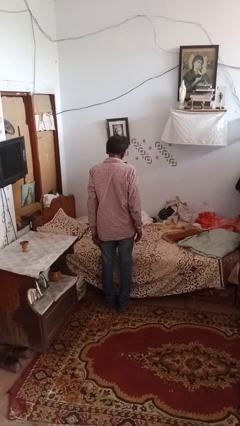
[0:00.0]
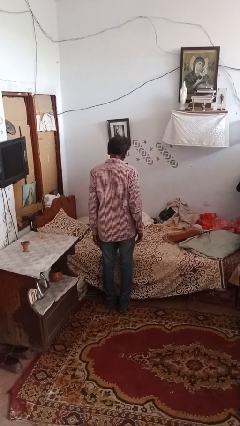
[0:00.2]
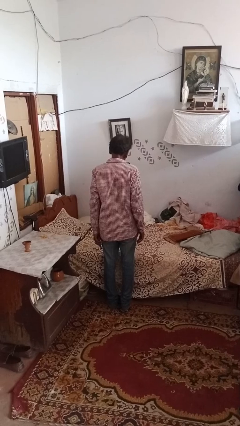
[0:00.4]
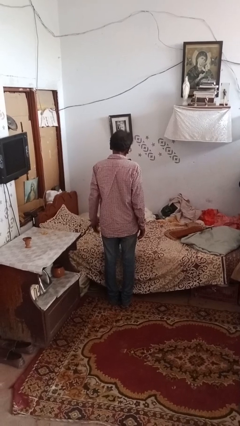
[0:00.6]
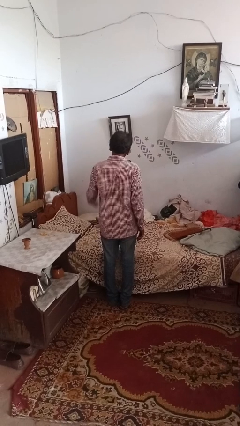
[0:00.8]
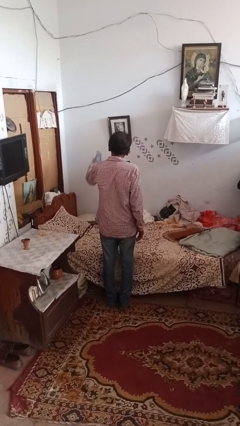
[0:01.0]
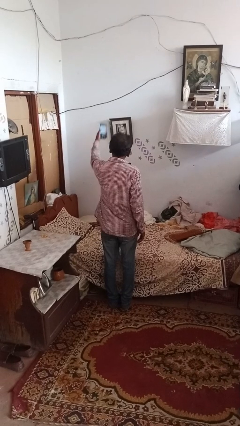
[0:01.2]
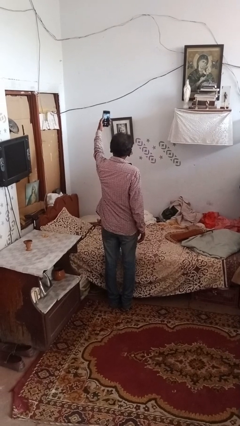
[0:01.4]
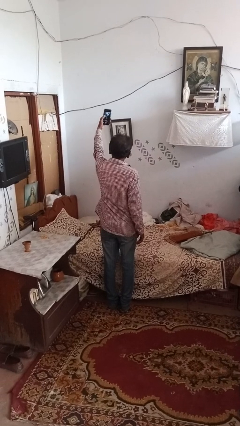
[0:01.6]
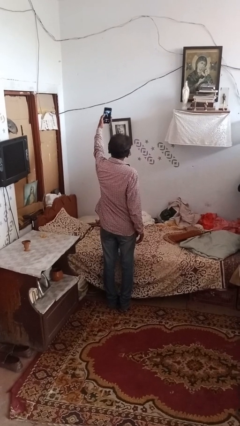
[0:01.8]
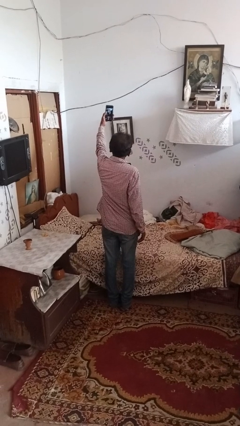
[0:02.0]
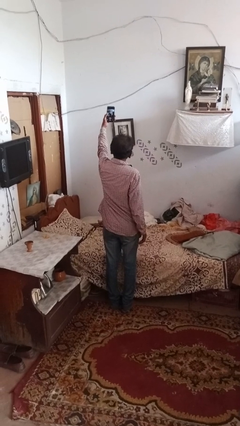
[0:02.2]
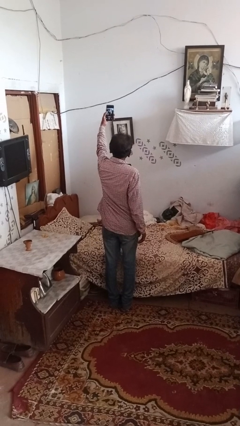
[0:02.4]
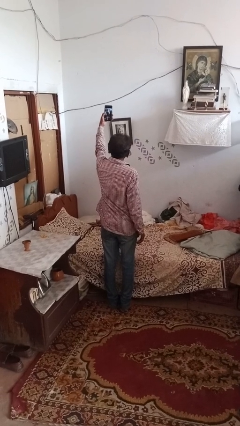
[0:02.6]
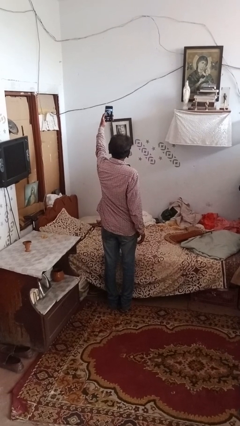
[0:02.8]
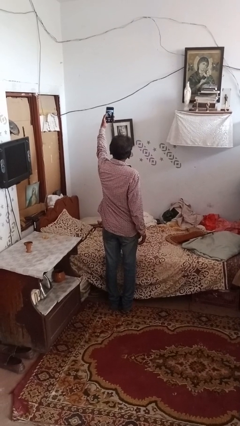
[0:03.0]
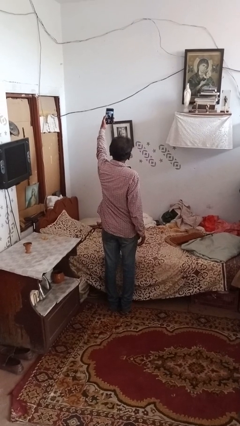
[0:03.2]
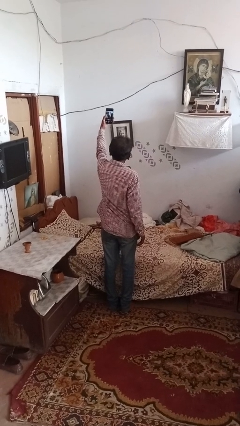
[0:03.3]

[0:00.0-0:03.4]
person takes selfie

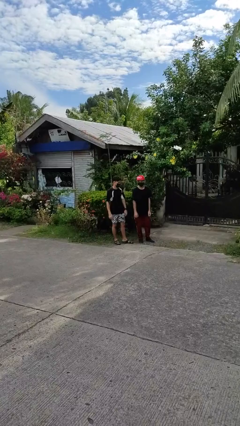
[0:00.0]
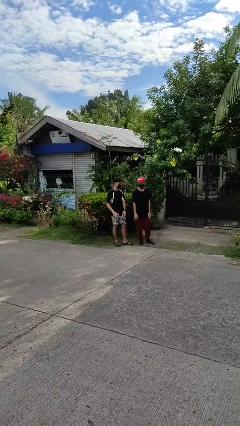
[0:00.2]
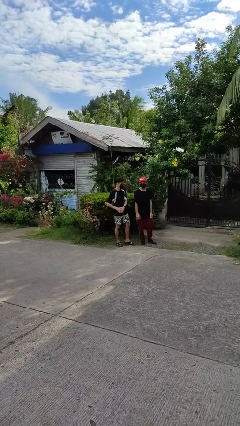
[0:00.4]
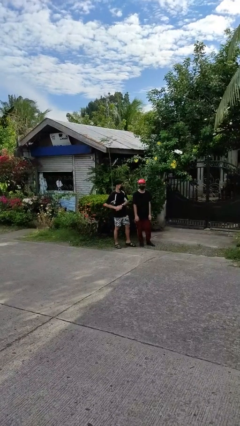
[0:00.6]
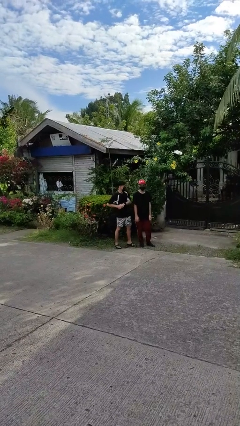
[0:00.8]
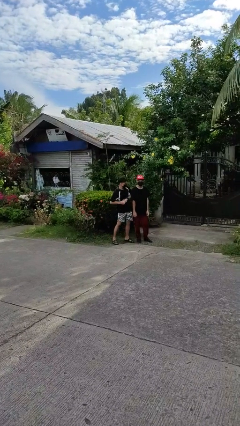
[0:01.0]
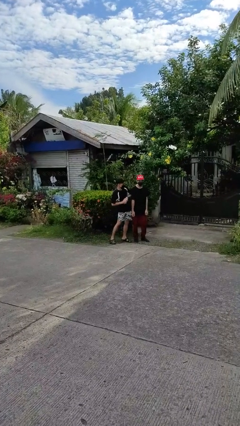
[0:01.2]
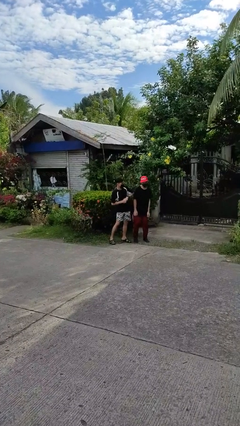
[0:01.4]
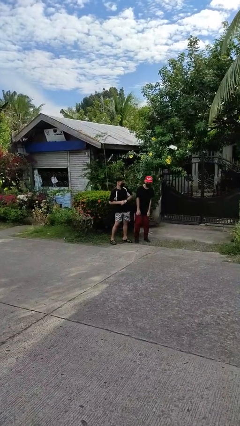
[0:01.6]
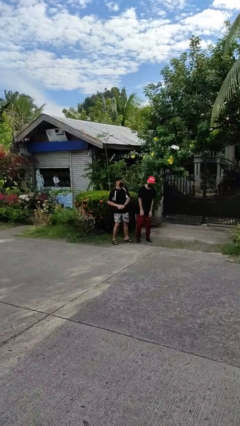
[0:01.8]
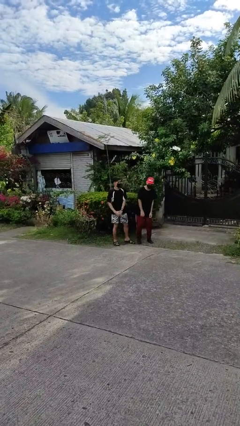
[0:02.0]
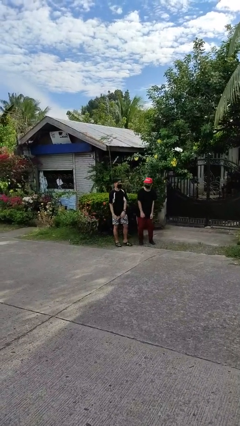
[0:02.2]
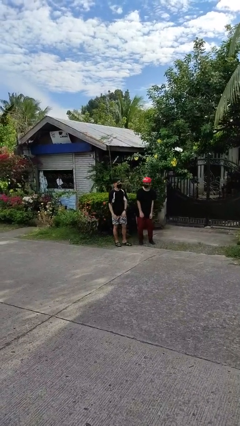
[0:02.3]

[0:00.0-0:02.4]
person nudges person with elbow

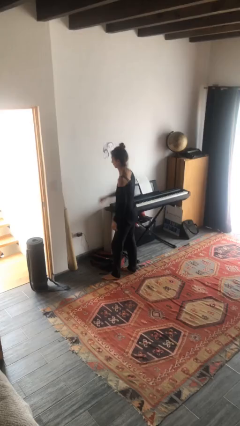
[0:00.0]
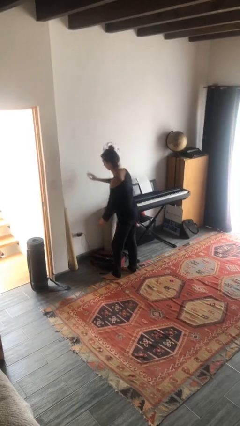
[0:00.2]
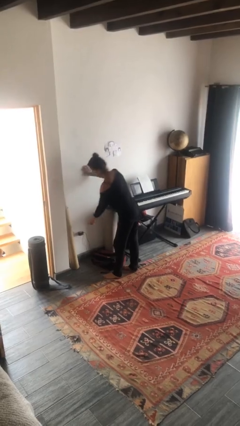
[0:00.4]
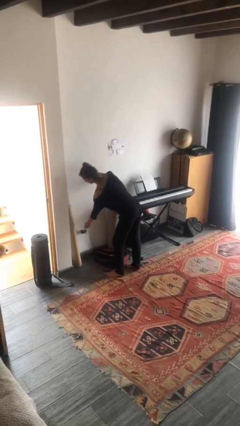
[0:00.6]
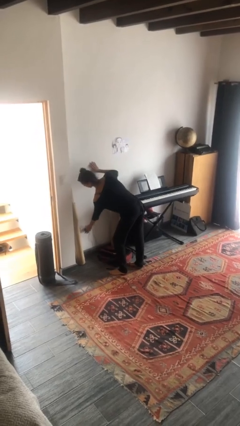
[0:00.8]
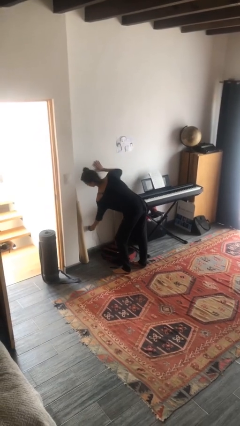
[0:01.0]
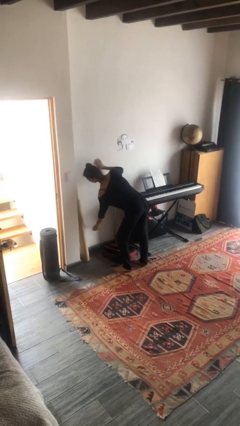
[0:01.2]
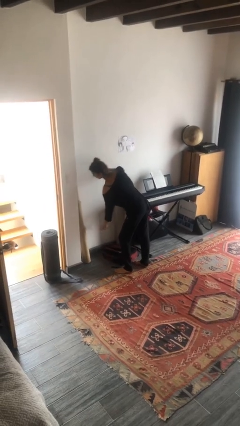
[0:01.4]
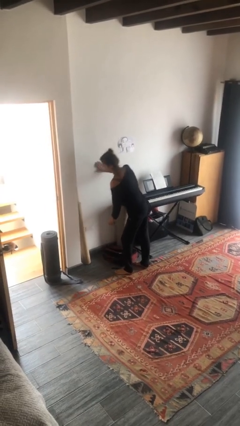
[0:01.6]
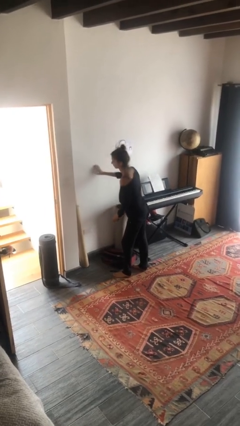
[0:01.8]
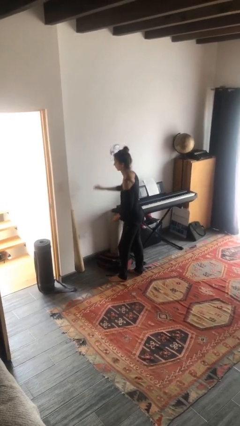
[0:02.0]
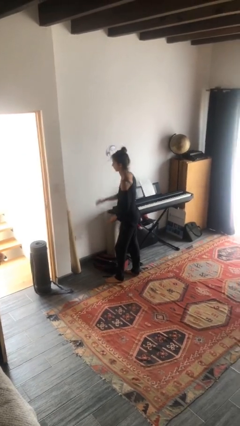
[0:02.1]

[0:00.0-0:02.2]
person unplugs from electrical socket

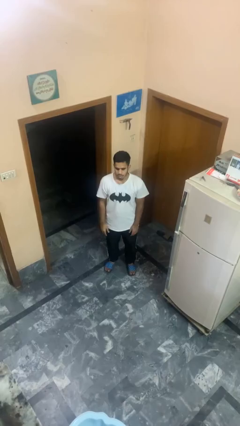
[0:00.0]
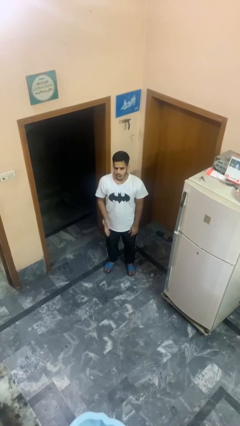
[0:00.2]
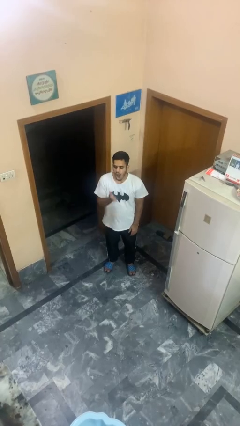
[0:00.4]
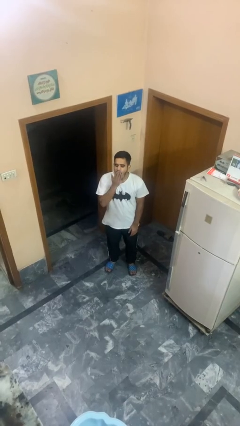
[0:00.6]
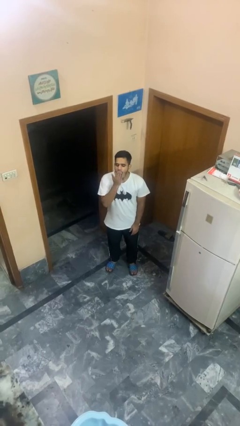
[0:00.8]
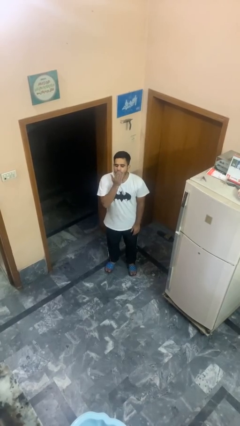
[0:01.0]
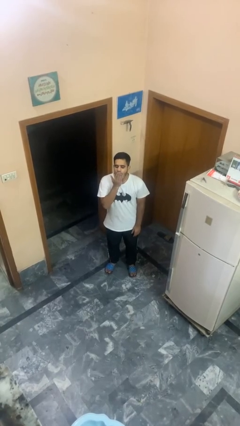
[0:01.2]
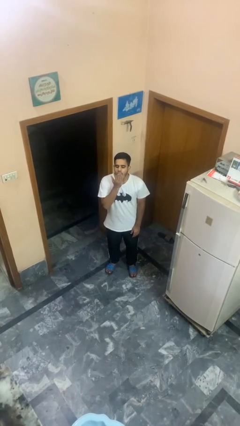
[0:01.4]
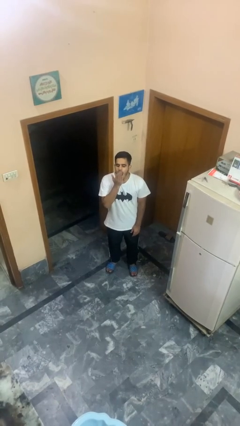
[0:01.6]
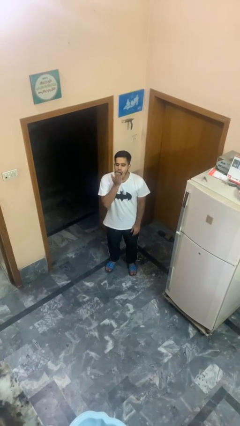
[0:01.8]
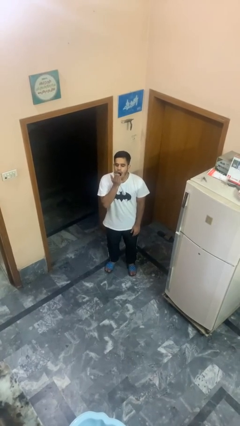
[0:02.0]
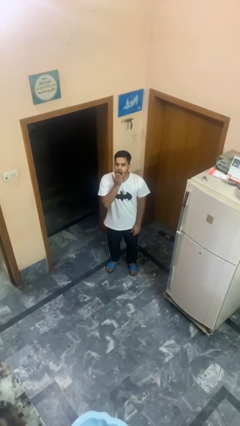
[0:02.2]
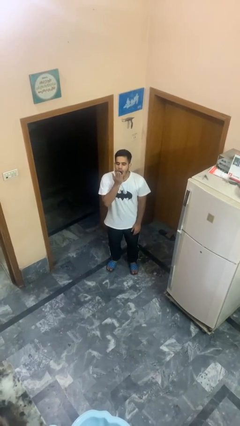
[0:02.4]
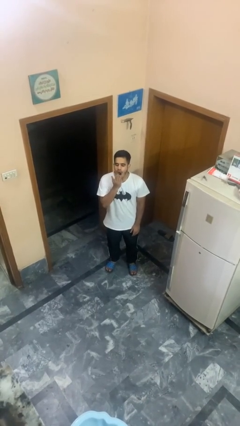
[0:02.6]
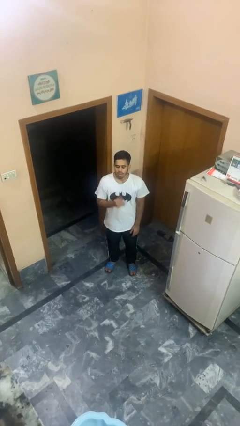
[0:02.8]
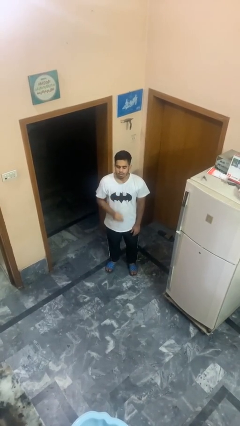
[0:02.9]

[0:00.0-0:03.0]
person yawns

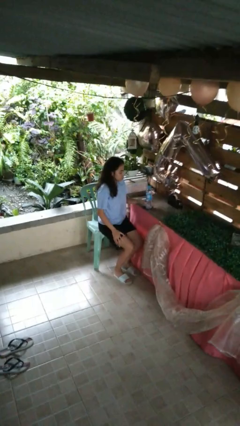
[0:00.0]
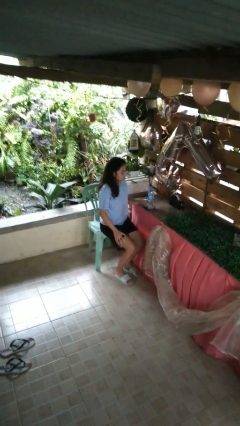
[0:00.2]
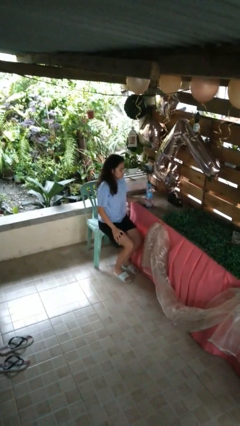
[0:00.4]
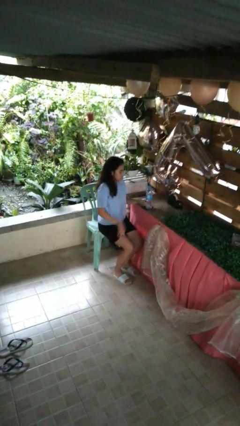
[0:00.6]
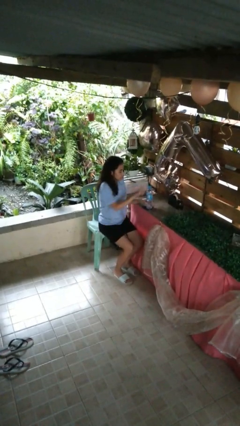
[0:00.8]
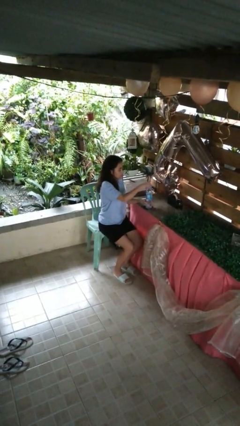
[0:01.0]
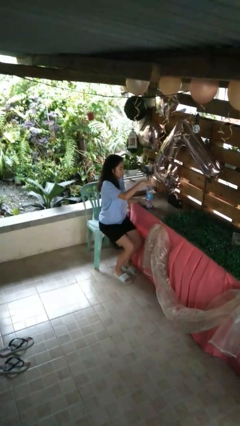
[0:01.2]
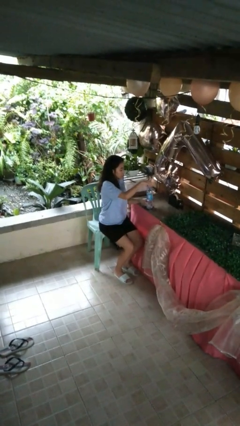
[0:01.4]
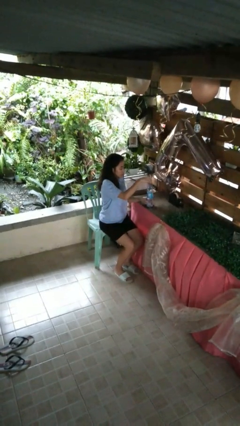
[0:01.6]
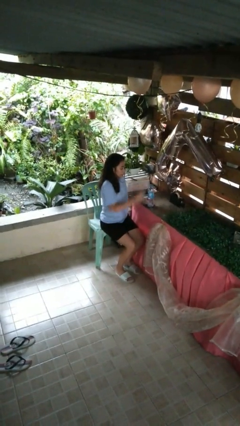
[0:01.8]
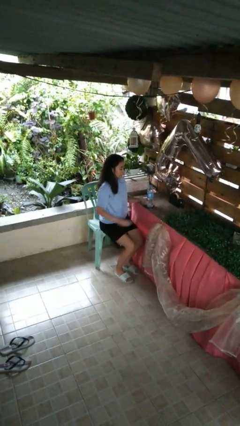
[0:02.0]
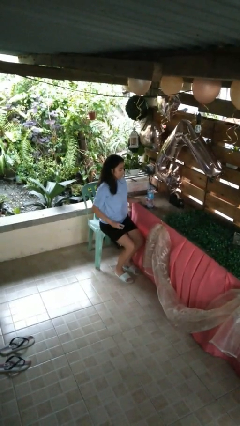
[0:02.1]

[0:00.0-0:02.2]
person unscrews lid from bottle

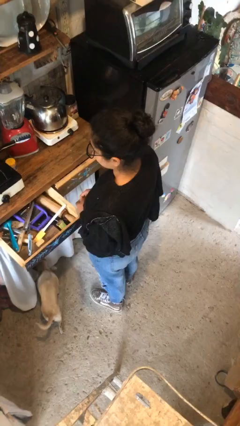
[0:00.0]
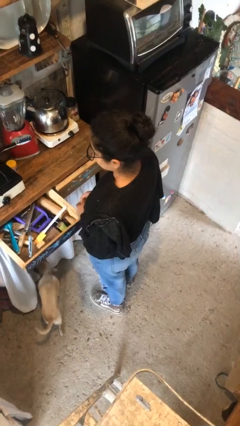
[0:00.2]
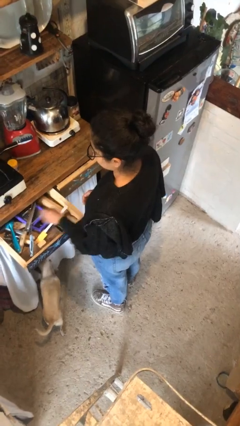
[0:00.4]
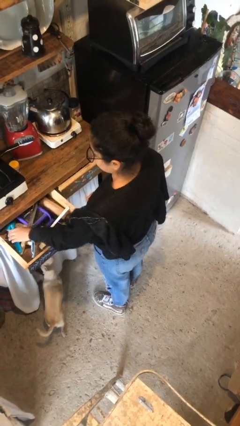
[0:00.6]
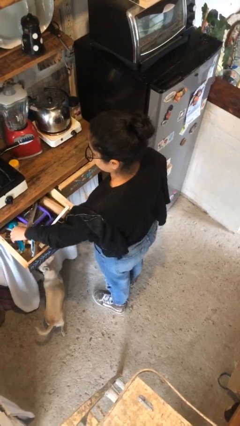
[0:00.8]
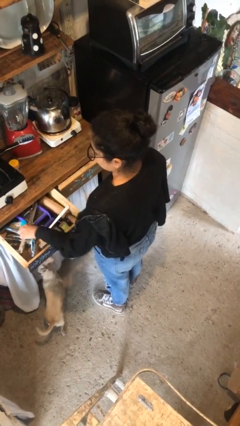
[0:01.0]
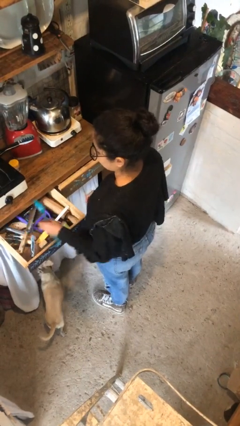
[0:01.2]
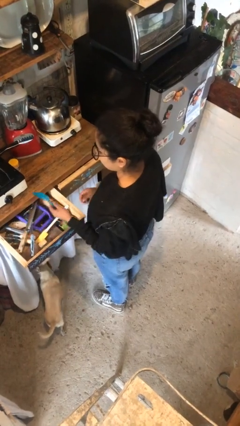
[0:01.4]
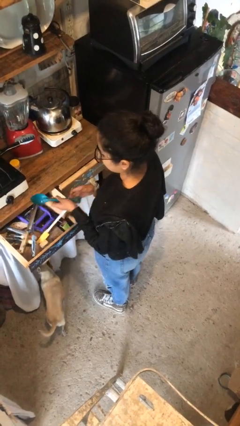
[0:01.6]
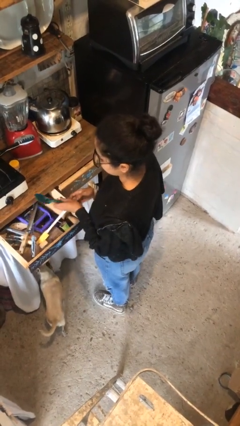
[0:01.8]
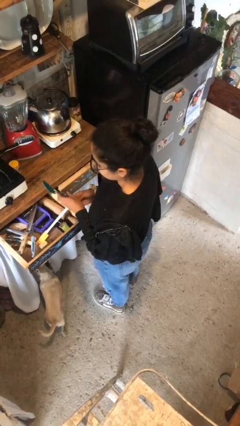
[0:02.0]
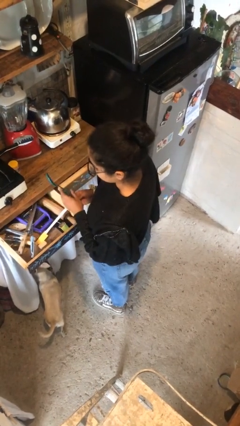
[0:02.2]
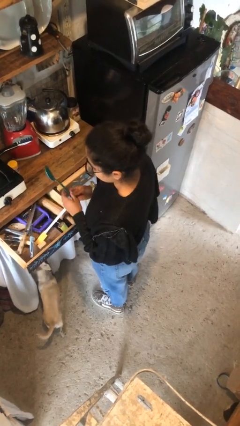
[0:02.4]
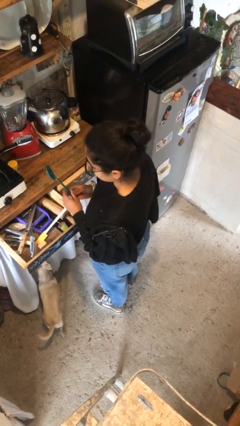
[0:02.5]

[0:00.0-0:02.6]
person takes object from kitchen drawer

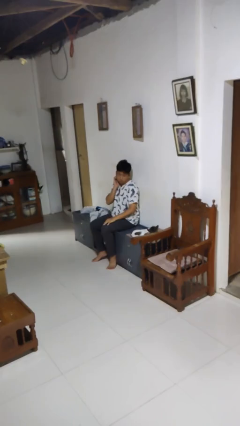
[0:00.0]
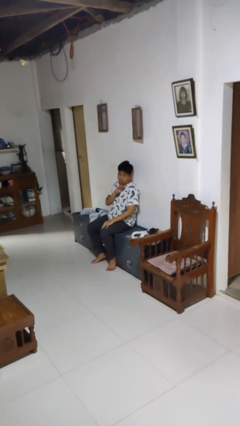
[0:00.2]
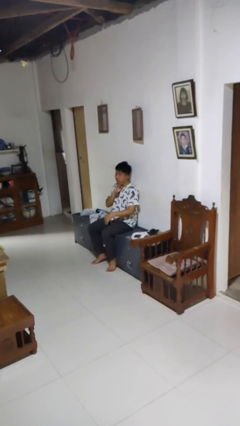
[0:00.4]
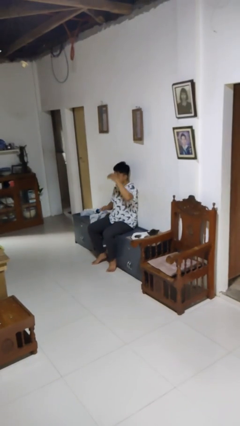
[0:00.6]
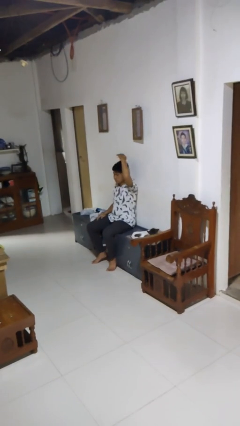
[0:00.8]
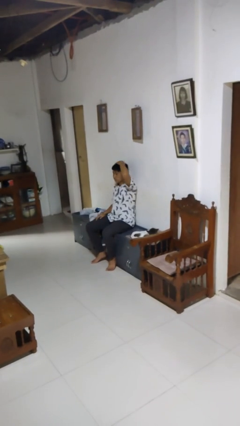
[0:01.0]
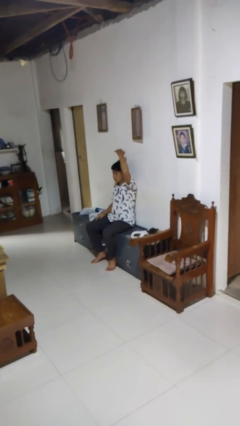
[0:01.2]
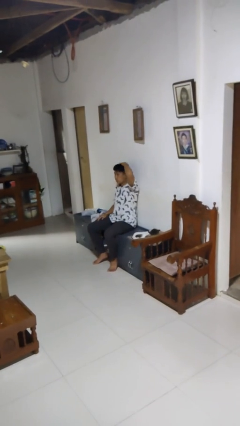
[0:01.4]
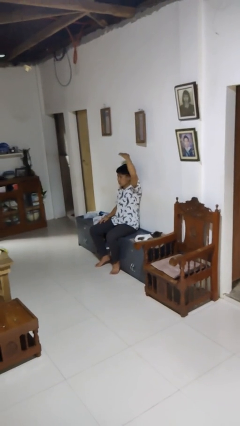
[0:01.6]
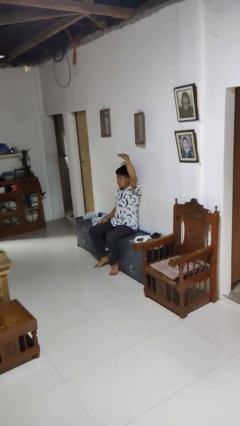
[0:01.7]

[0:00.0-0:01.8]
person pats head
